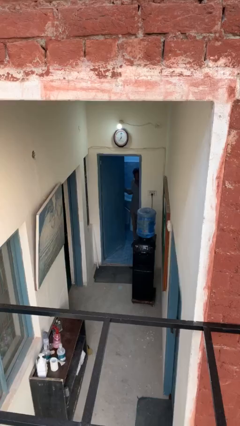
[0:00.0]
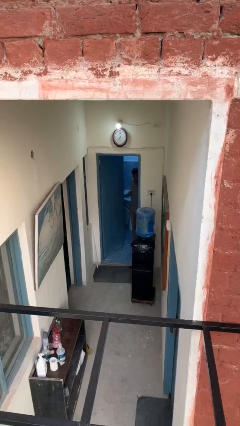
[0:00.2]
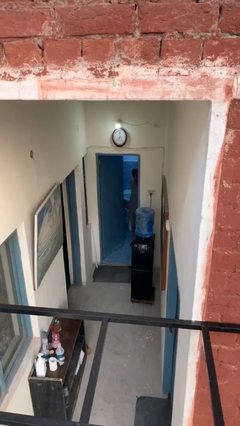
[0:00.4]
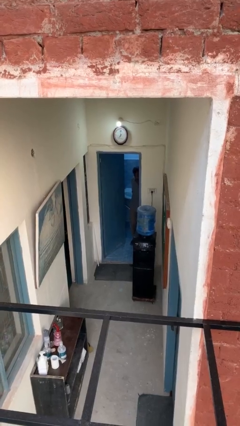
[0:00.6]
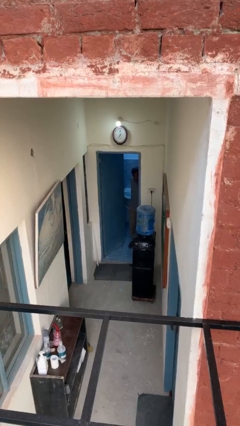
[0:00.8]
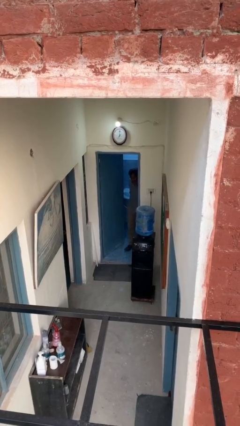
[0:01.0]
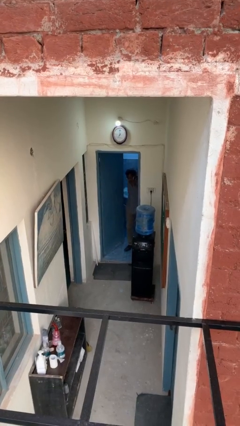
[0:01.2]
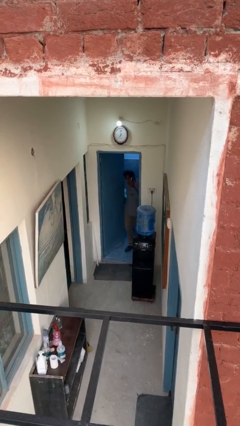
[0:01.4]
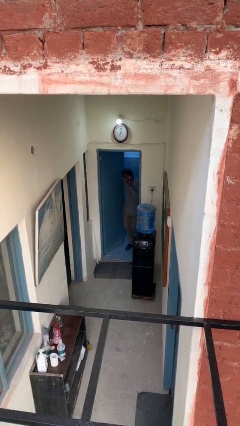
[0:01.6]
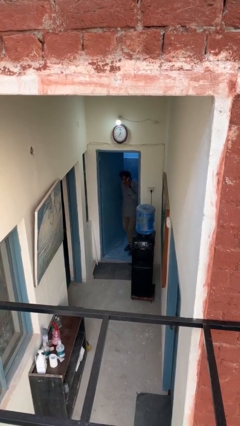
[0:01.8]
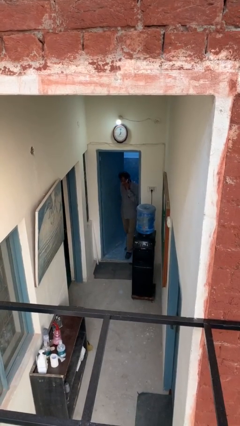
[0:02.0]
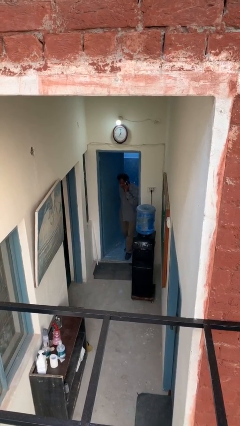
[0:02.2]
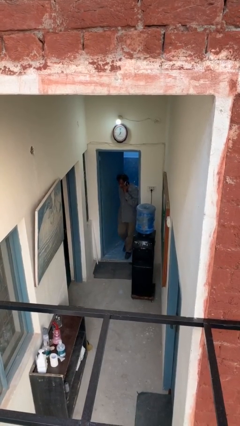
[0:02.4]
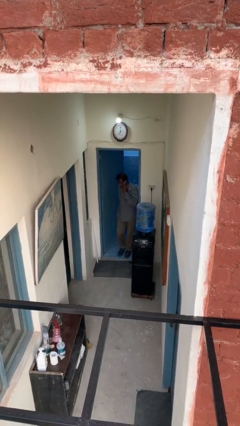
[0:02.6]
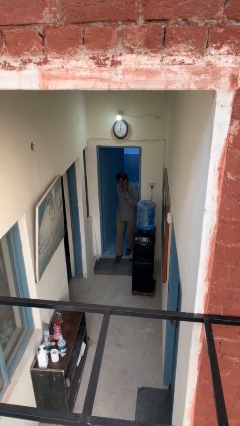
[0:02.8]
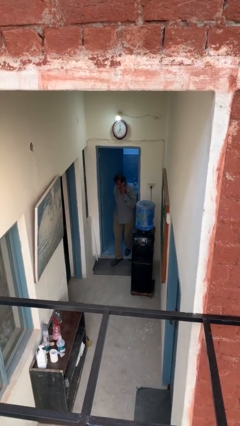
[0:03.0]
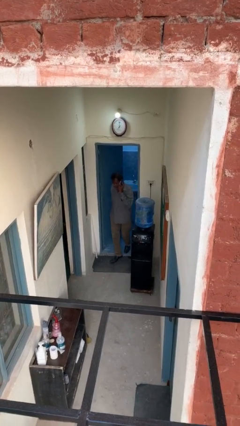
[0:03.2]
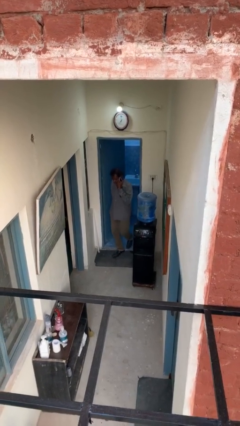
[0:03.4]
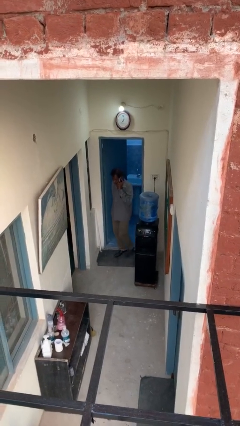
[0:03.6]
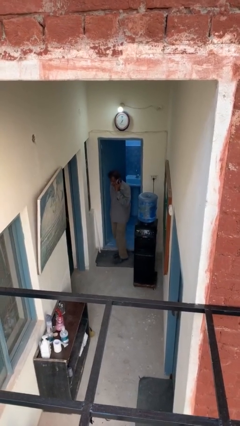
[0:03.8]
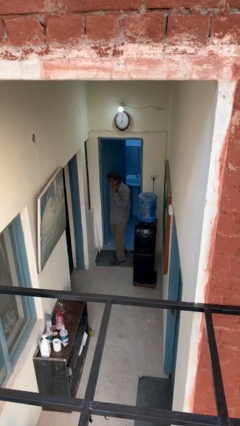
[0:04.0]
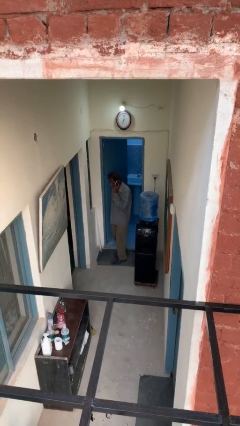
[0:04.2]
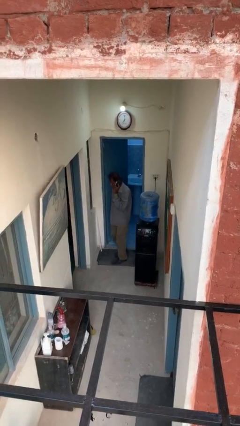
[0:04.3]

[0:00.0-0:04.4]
person enters scene through structure

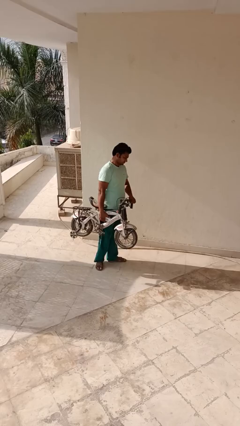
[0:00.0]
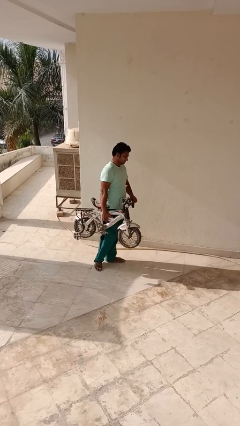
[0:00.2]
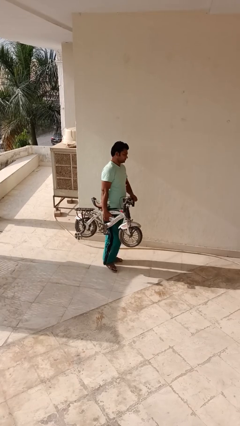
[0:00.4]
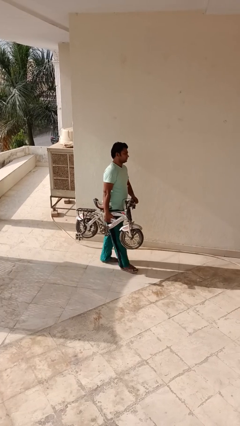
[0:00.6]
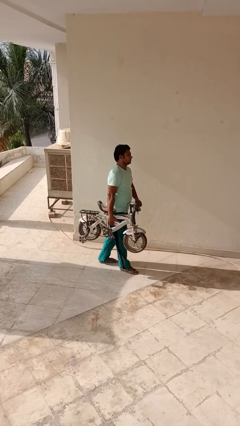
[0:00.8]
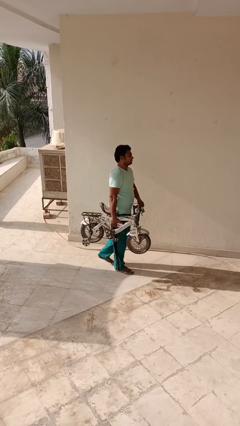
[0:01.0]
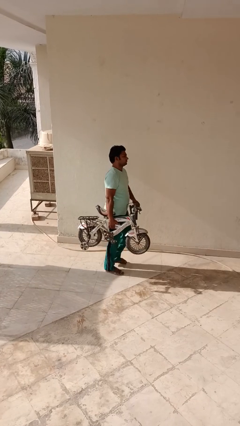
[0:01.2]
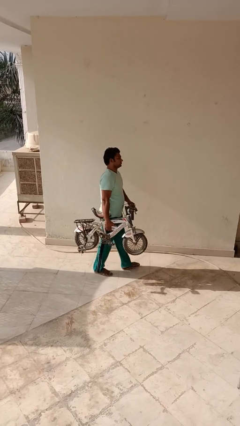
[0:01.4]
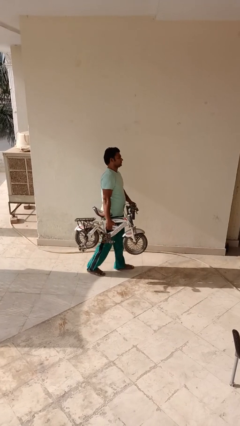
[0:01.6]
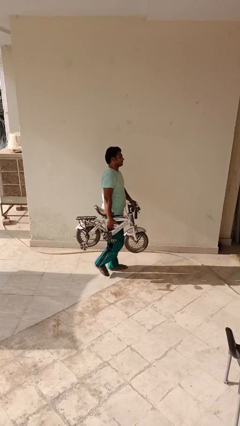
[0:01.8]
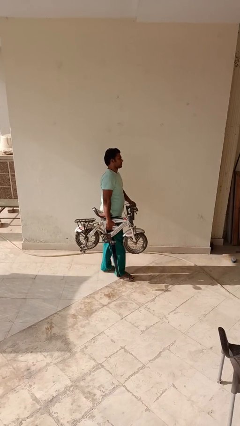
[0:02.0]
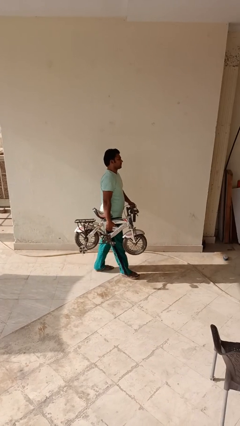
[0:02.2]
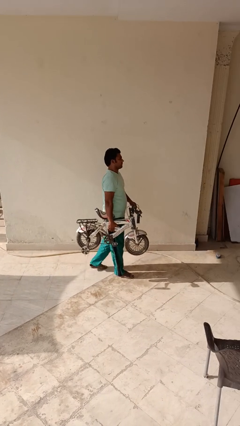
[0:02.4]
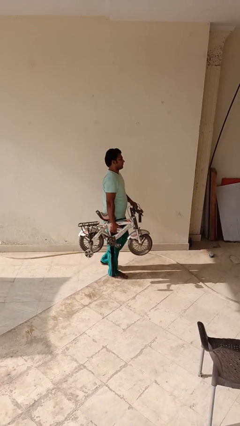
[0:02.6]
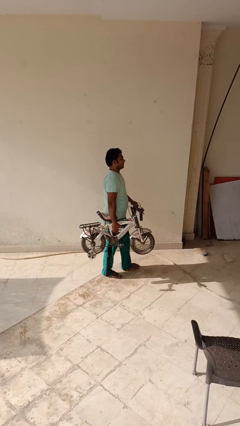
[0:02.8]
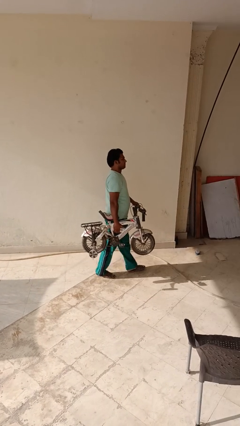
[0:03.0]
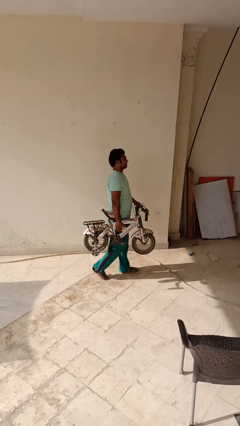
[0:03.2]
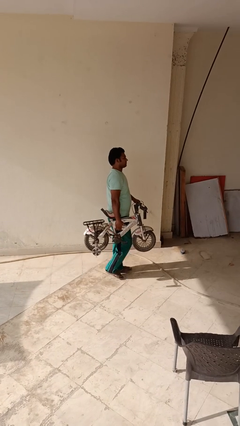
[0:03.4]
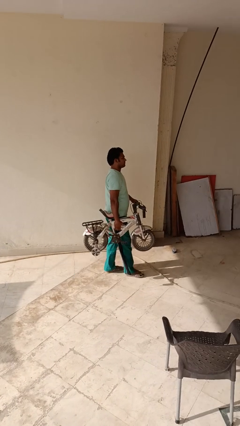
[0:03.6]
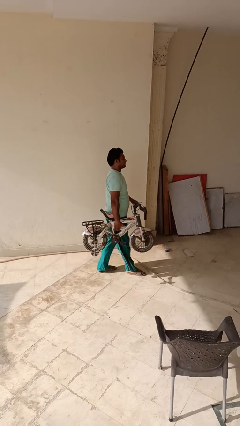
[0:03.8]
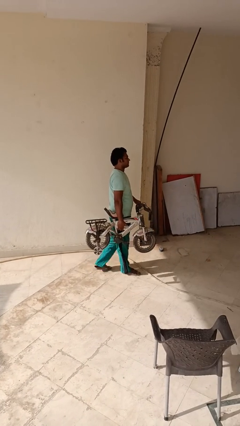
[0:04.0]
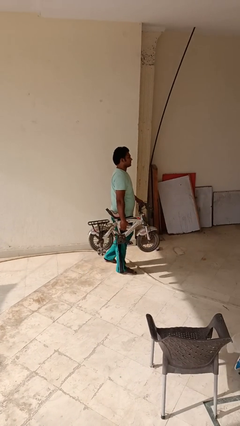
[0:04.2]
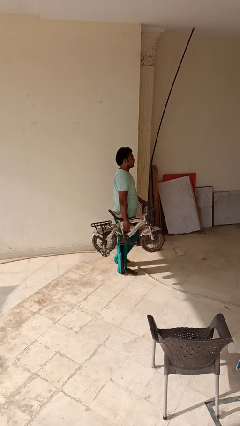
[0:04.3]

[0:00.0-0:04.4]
person carries bicycle

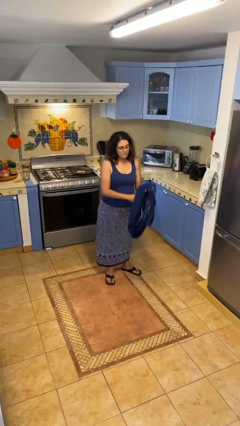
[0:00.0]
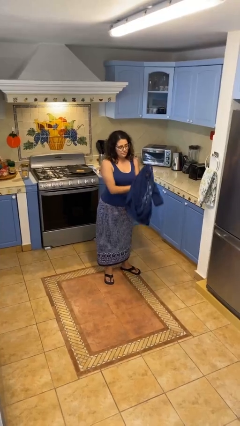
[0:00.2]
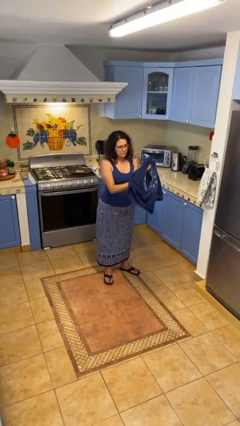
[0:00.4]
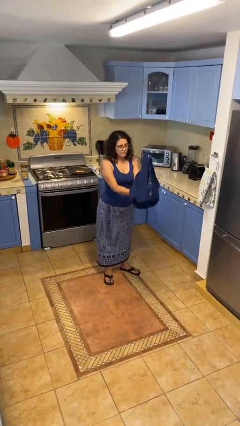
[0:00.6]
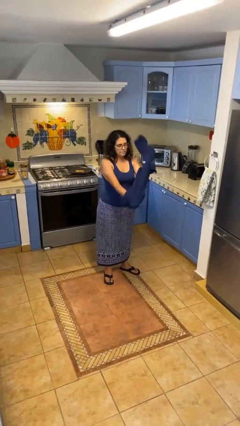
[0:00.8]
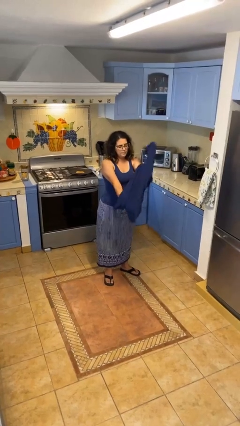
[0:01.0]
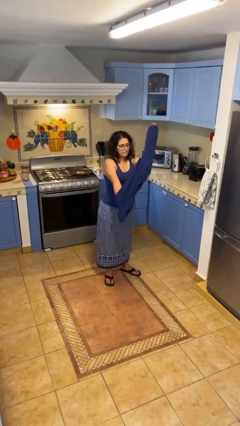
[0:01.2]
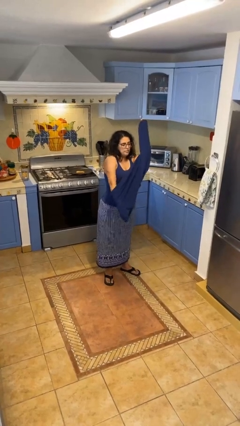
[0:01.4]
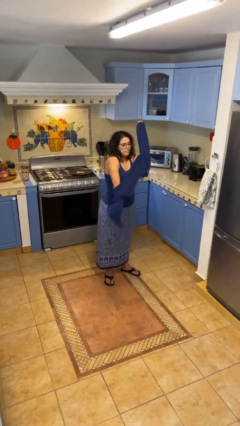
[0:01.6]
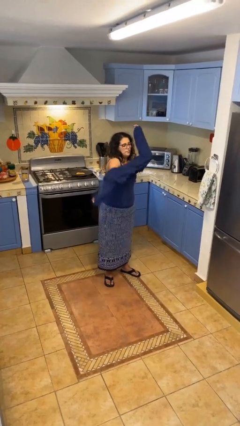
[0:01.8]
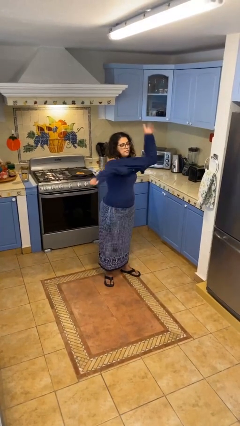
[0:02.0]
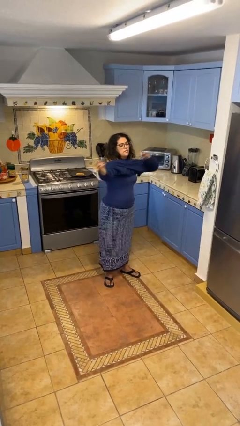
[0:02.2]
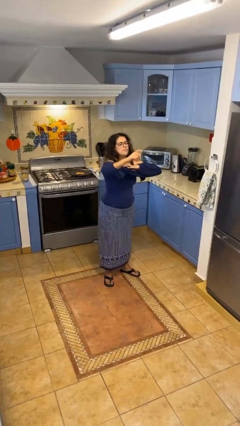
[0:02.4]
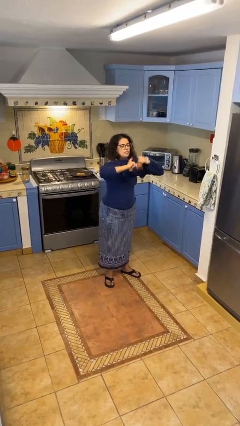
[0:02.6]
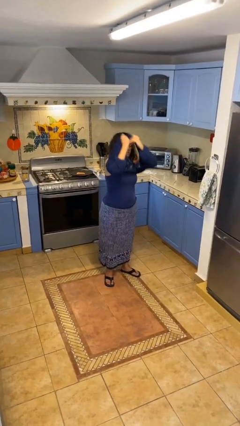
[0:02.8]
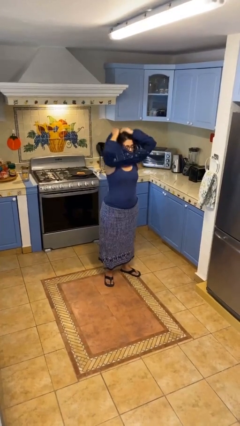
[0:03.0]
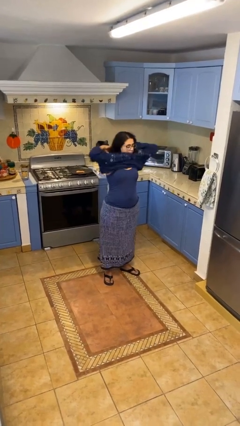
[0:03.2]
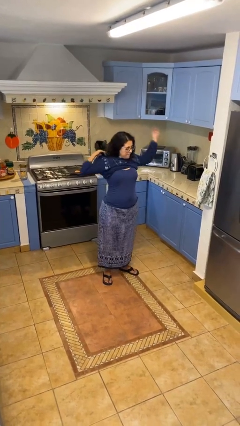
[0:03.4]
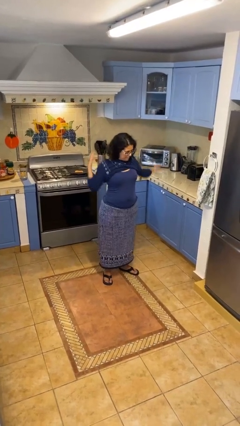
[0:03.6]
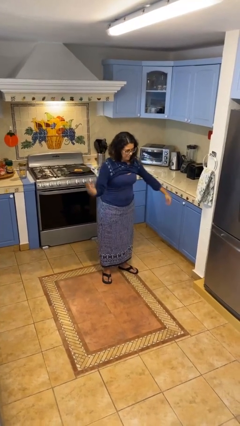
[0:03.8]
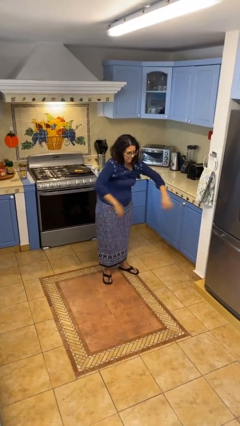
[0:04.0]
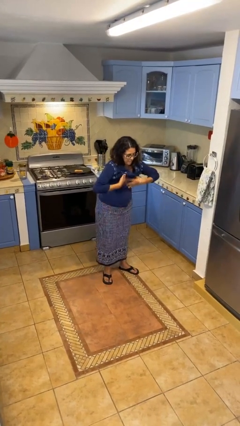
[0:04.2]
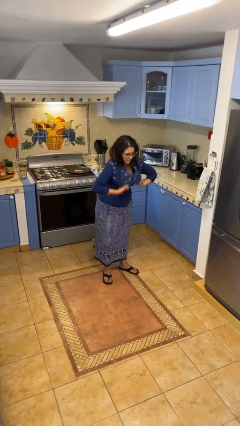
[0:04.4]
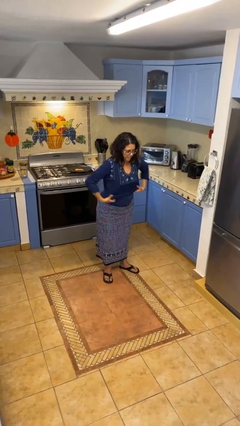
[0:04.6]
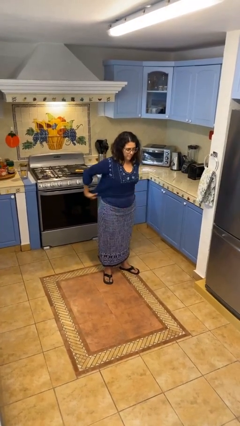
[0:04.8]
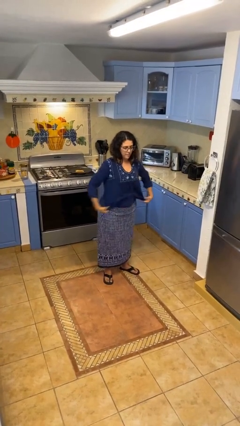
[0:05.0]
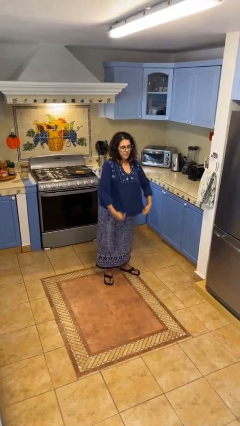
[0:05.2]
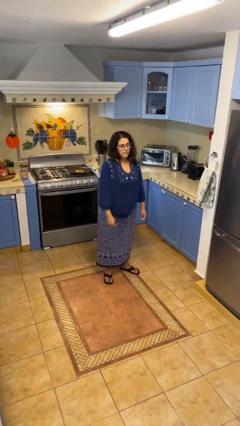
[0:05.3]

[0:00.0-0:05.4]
person puts on shirt

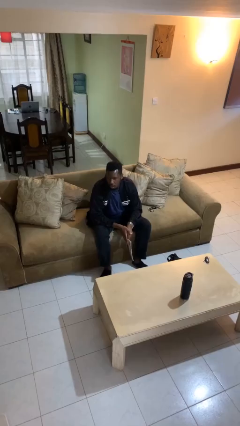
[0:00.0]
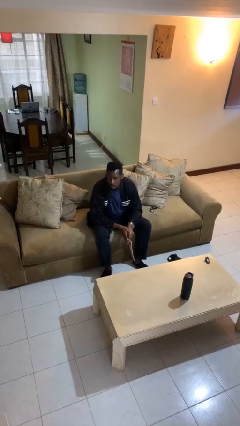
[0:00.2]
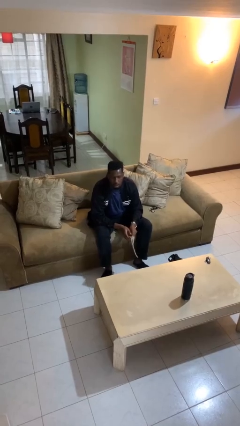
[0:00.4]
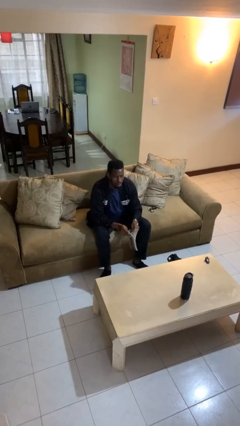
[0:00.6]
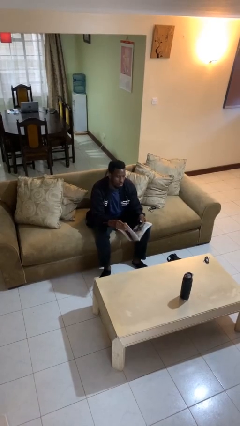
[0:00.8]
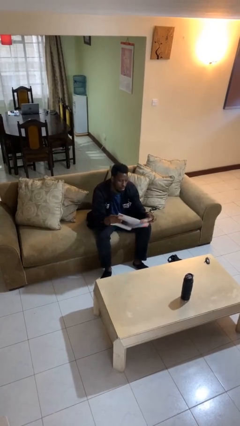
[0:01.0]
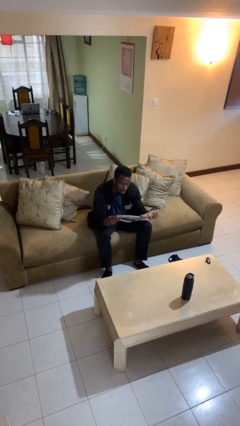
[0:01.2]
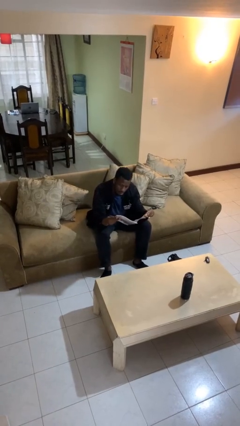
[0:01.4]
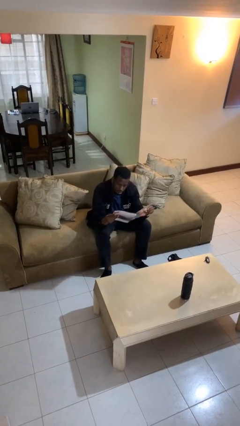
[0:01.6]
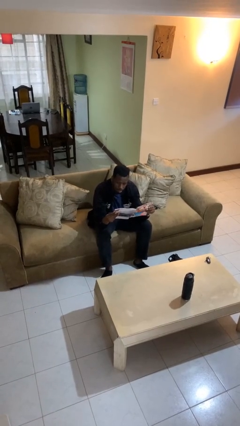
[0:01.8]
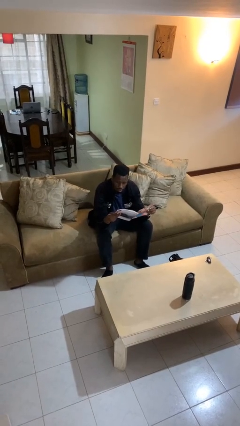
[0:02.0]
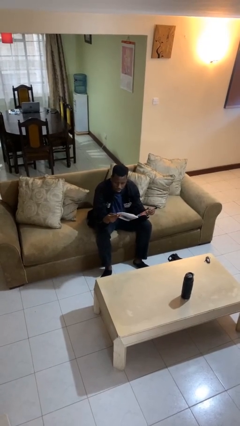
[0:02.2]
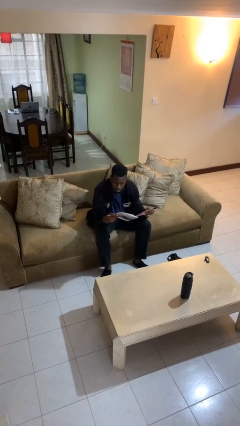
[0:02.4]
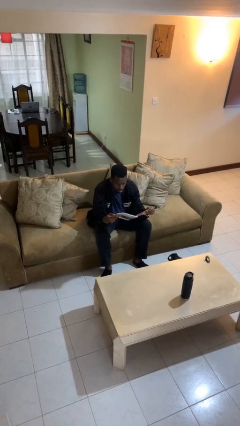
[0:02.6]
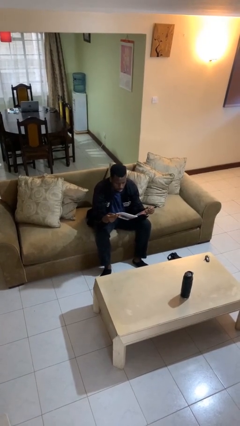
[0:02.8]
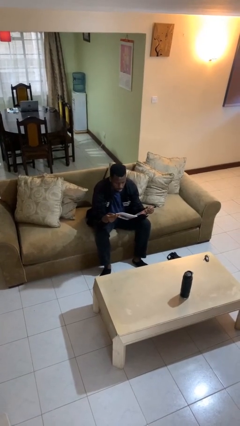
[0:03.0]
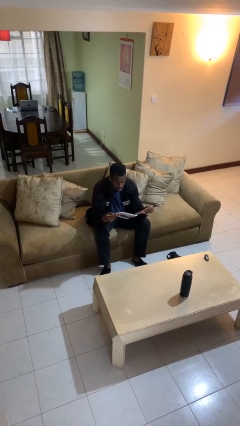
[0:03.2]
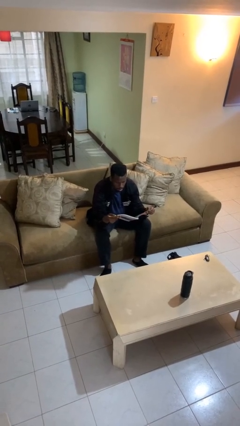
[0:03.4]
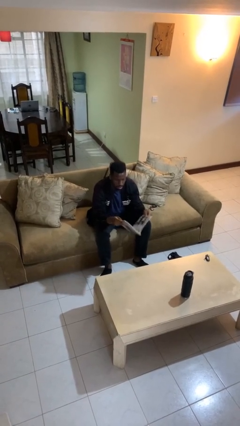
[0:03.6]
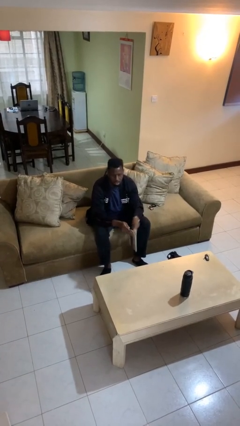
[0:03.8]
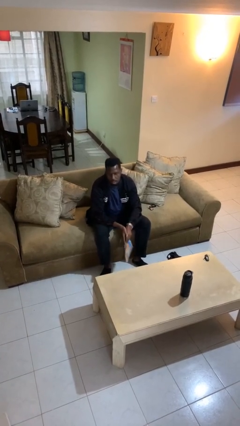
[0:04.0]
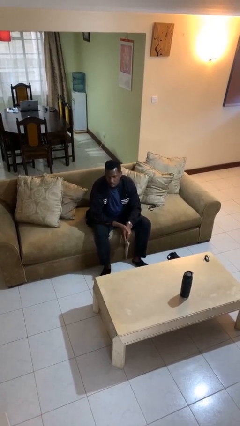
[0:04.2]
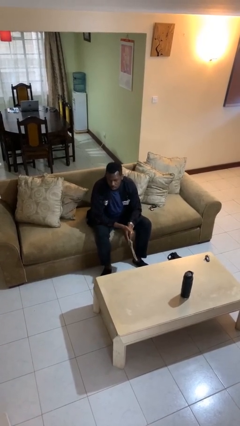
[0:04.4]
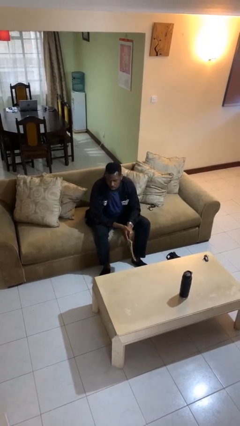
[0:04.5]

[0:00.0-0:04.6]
person reads magazine
